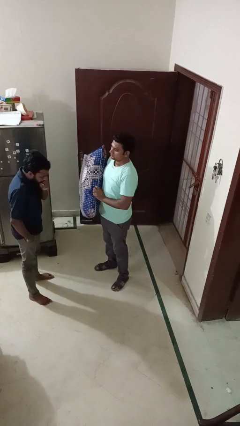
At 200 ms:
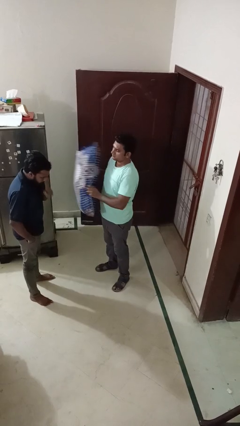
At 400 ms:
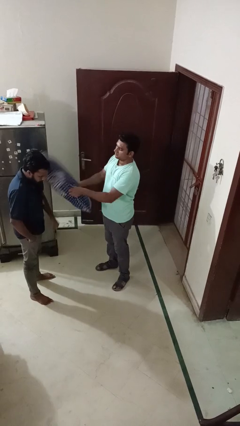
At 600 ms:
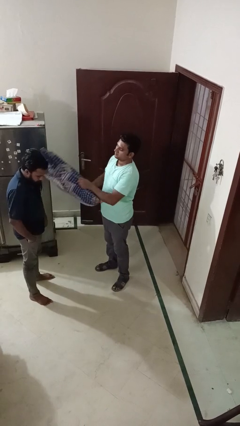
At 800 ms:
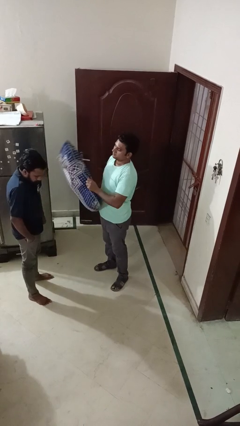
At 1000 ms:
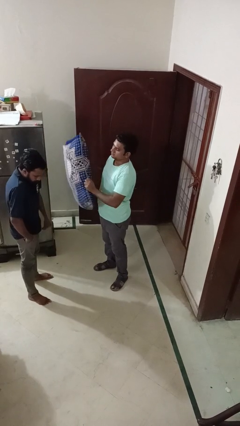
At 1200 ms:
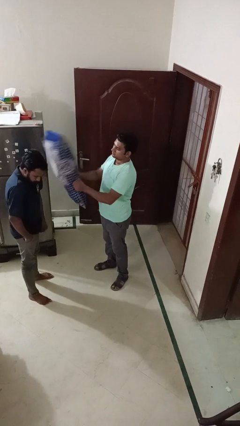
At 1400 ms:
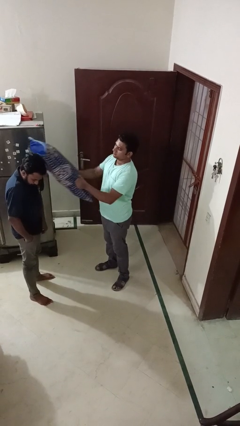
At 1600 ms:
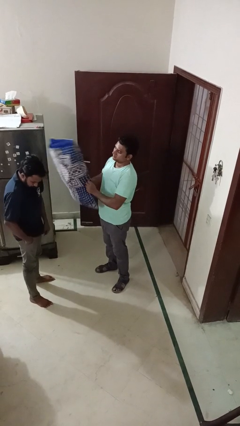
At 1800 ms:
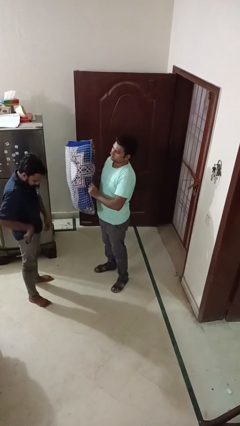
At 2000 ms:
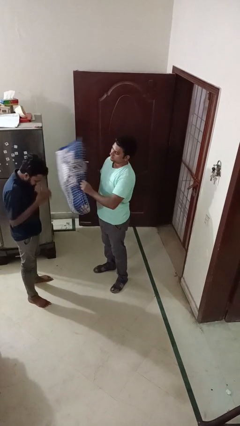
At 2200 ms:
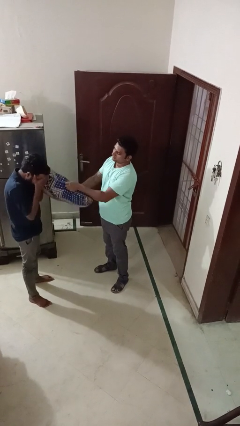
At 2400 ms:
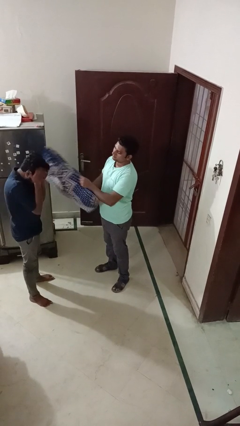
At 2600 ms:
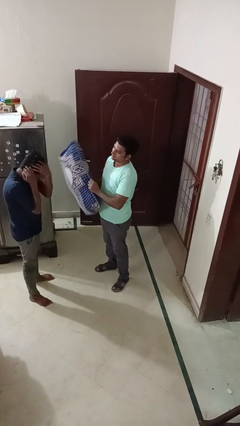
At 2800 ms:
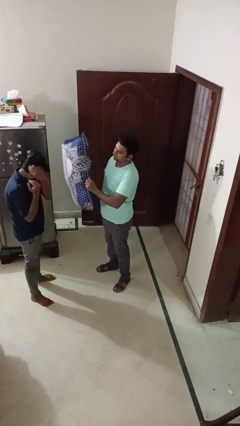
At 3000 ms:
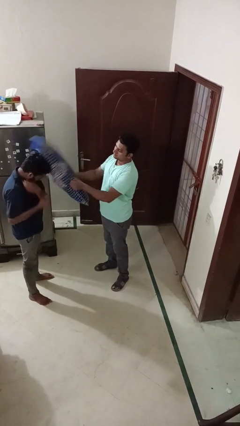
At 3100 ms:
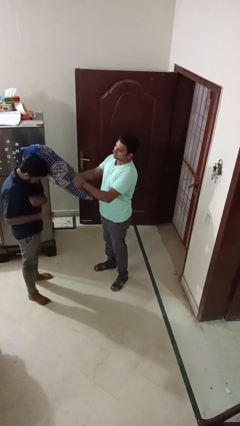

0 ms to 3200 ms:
person hits person with pillow

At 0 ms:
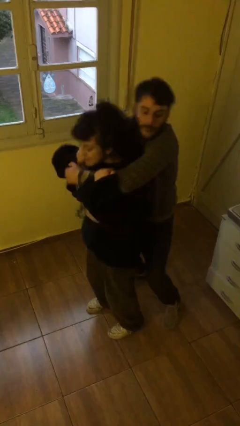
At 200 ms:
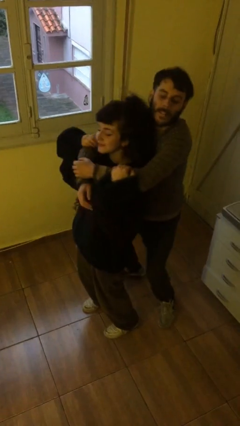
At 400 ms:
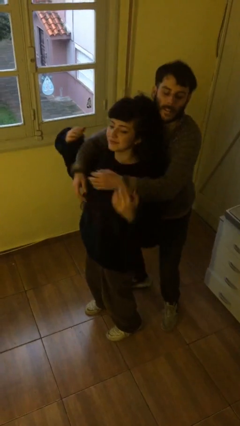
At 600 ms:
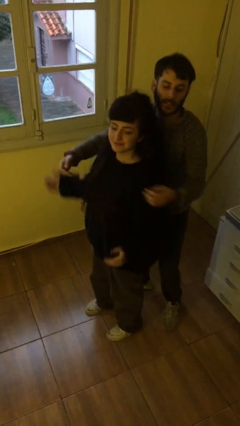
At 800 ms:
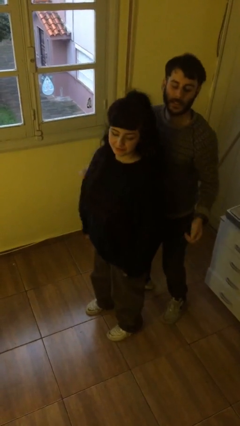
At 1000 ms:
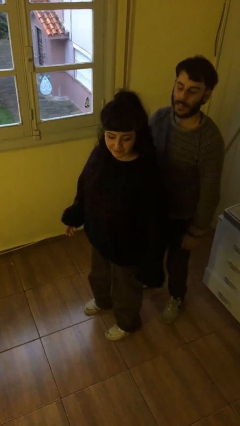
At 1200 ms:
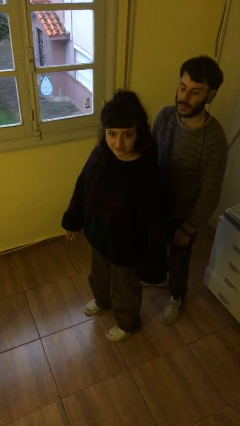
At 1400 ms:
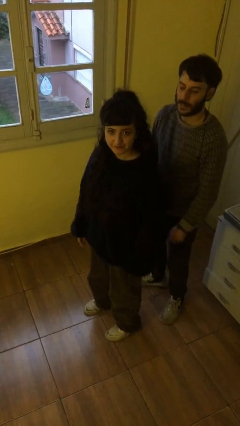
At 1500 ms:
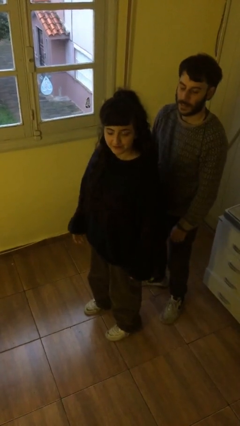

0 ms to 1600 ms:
person puts down person

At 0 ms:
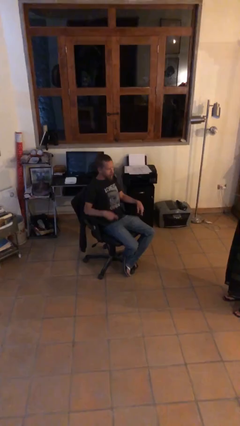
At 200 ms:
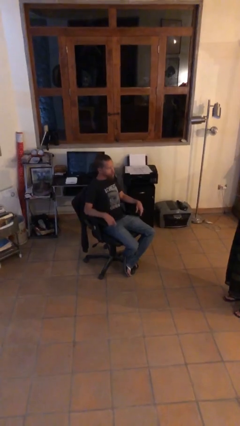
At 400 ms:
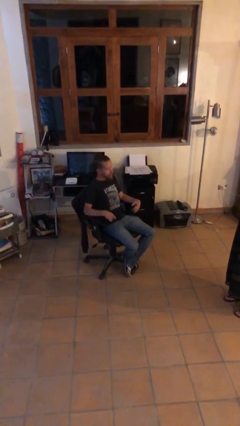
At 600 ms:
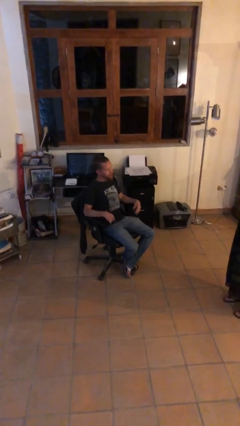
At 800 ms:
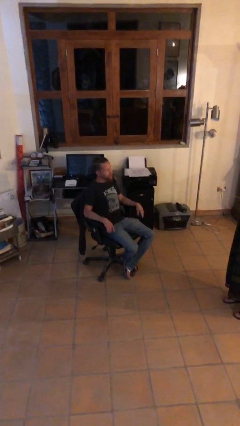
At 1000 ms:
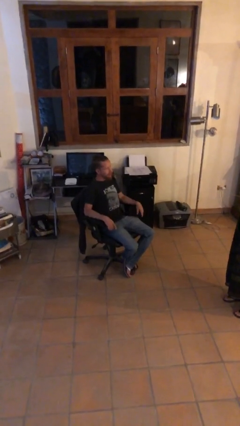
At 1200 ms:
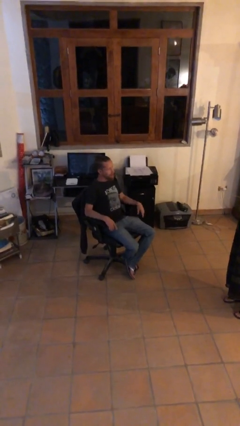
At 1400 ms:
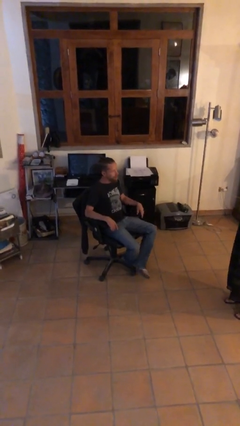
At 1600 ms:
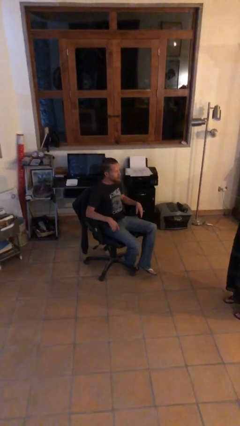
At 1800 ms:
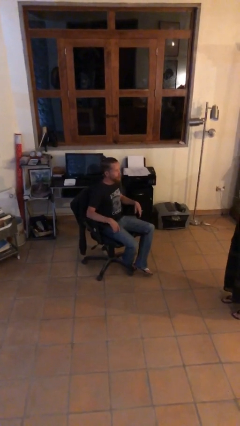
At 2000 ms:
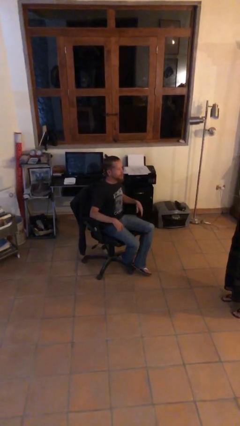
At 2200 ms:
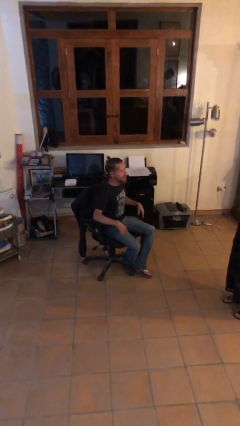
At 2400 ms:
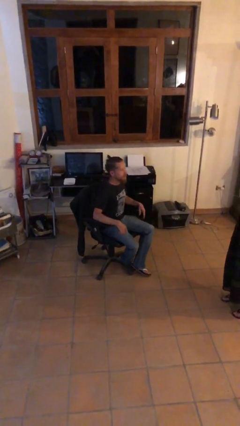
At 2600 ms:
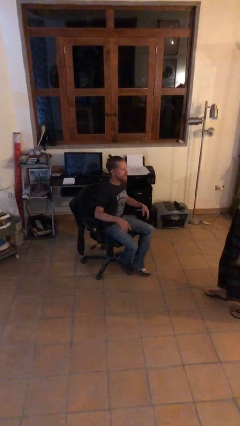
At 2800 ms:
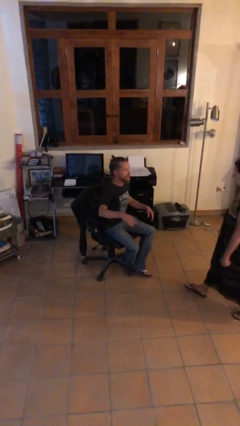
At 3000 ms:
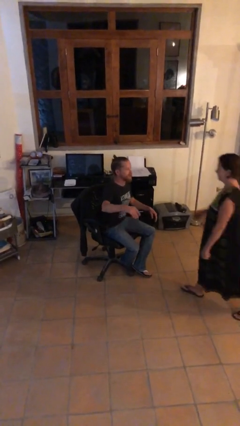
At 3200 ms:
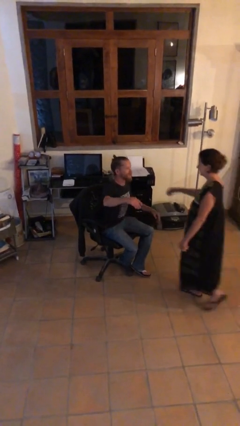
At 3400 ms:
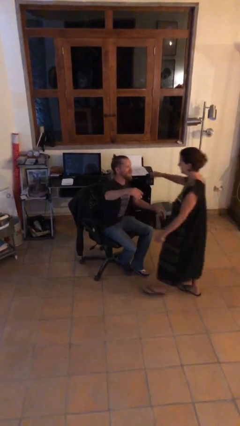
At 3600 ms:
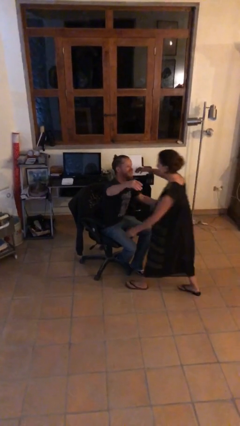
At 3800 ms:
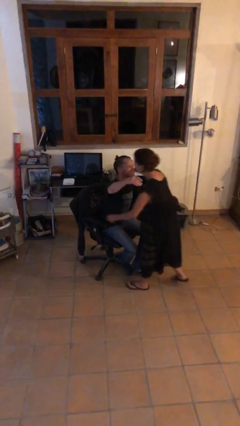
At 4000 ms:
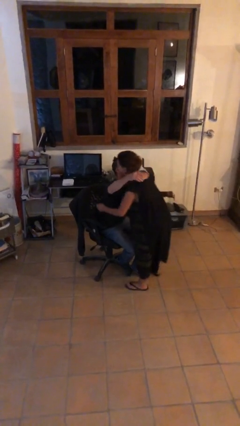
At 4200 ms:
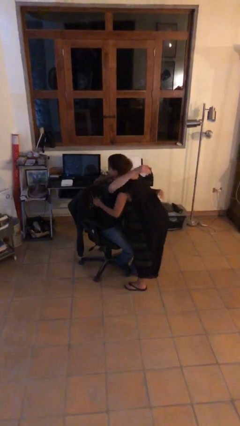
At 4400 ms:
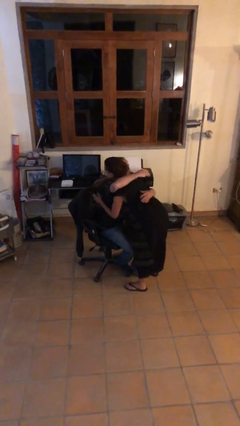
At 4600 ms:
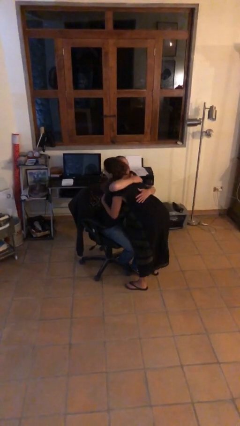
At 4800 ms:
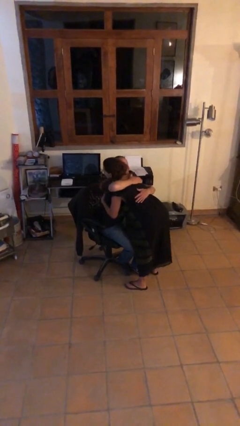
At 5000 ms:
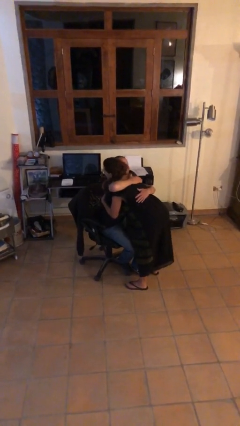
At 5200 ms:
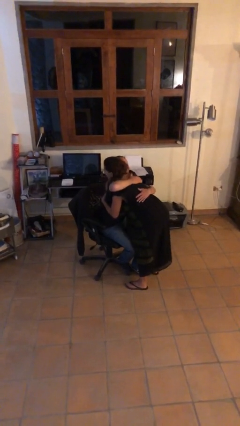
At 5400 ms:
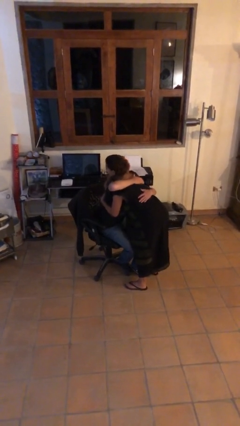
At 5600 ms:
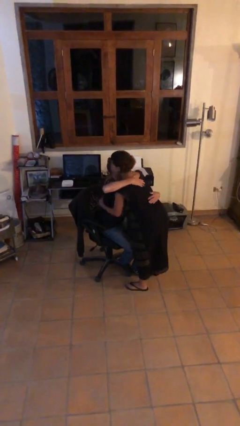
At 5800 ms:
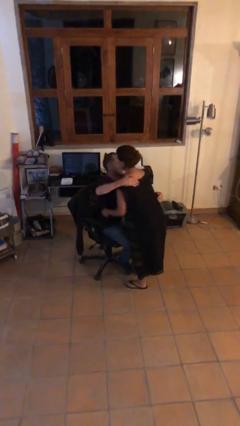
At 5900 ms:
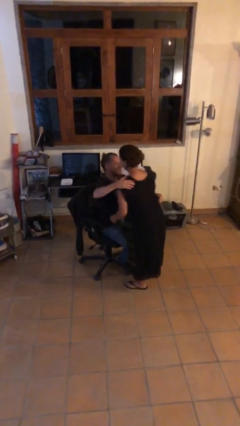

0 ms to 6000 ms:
person embraces person

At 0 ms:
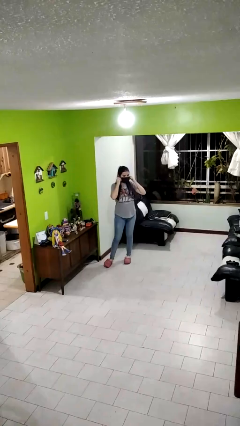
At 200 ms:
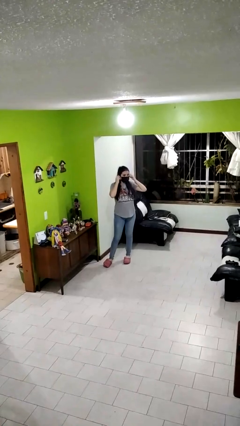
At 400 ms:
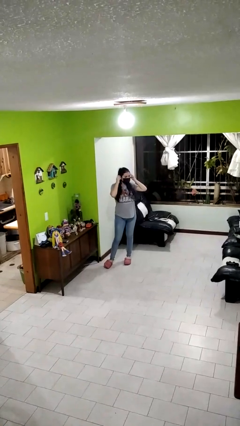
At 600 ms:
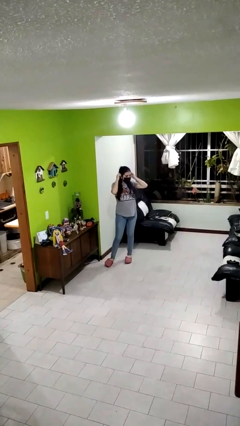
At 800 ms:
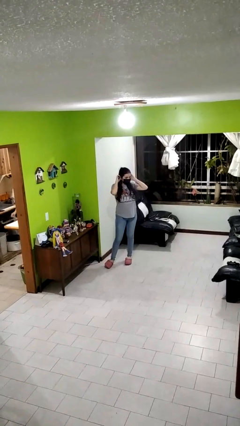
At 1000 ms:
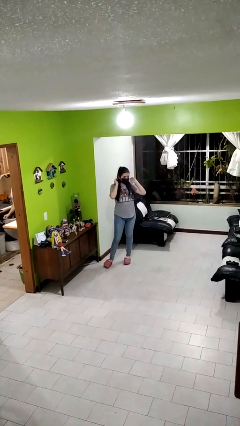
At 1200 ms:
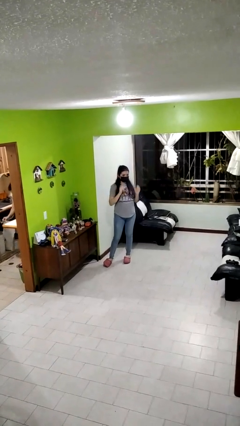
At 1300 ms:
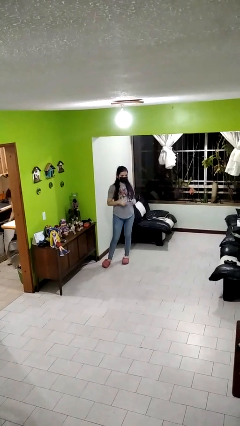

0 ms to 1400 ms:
person puts on facemask

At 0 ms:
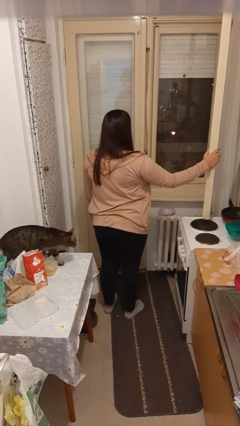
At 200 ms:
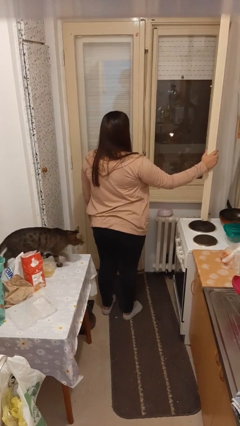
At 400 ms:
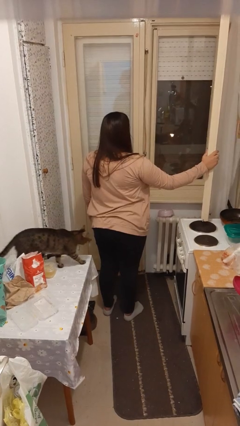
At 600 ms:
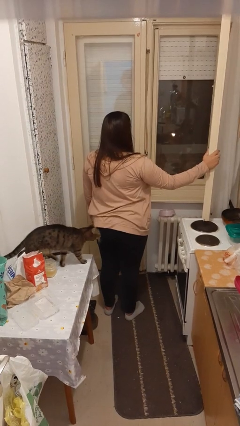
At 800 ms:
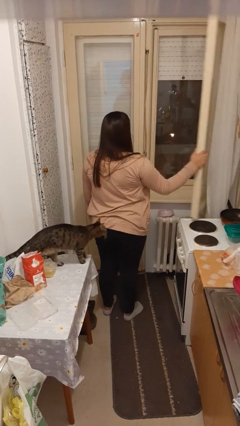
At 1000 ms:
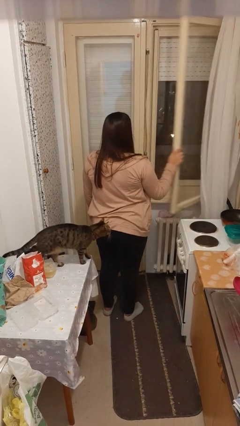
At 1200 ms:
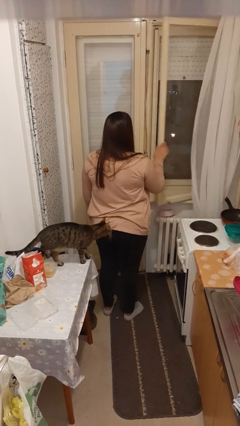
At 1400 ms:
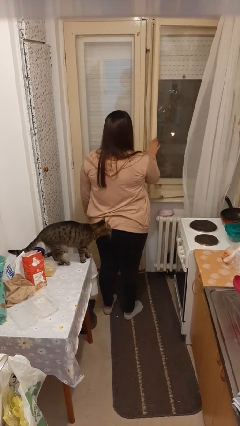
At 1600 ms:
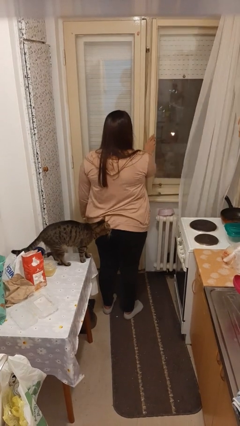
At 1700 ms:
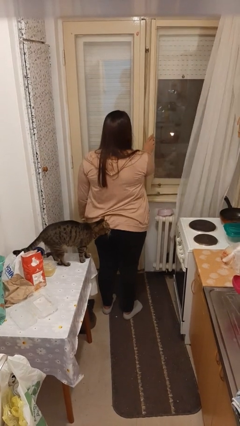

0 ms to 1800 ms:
person closes home window

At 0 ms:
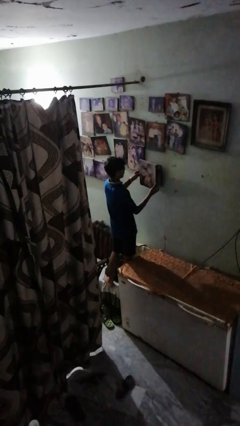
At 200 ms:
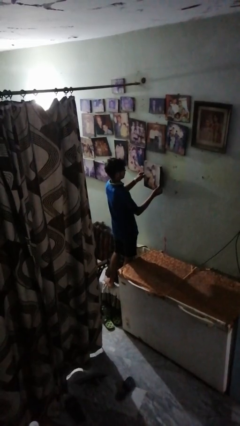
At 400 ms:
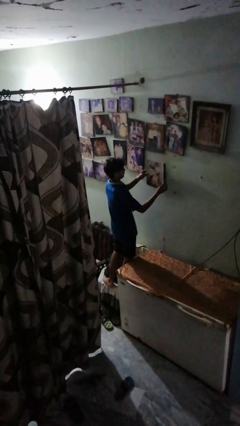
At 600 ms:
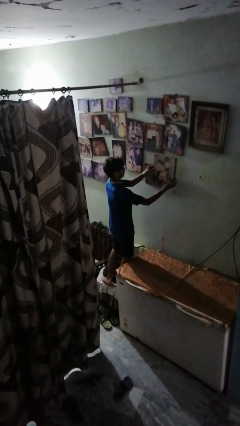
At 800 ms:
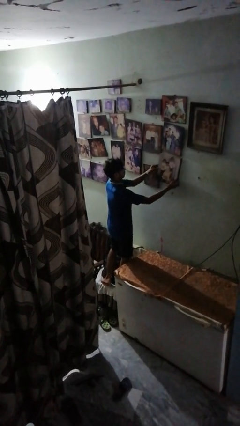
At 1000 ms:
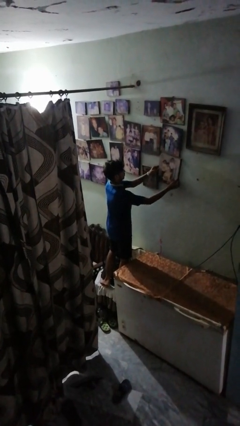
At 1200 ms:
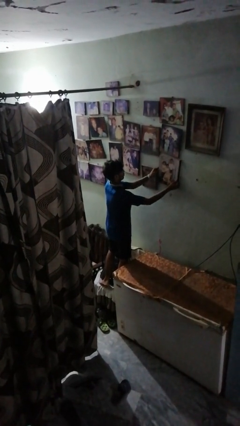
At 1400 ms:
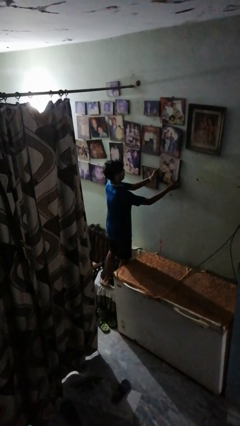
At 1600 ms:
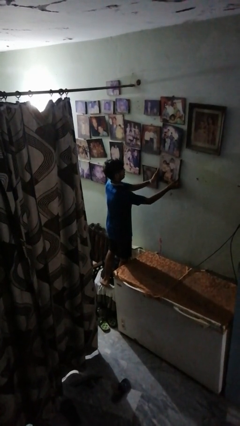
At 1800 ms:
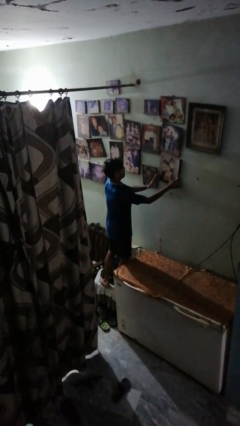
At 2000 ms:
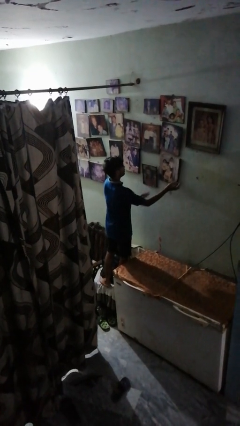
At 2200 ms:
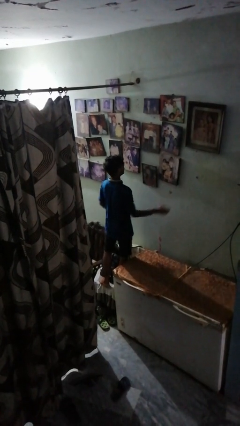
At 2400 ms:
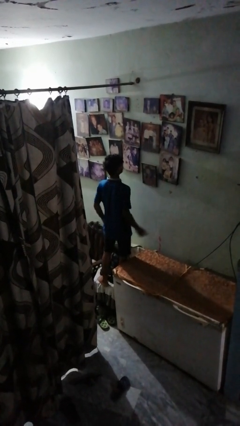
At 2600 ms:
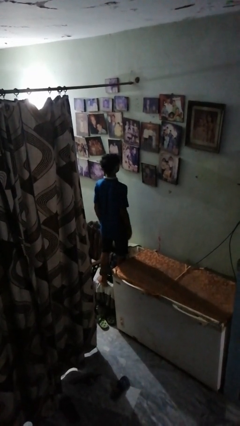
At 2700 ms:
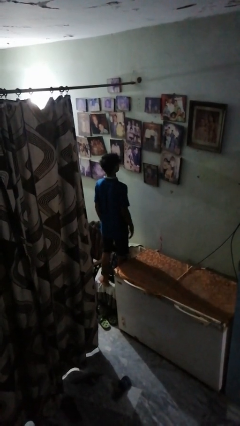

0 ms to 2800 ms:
person puts up picture frame

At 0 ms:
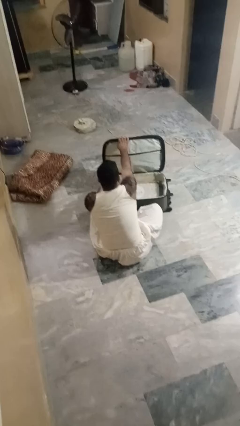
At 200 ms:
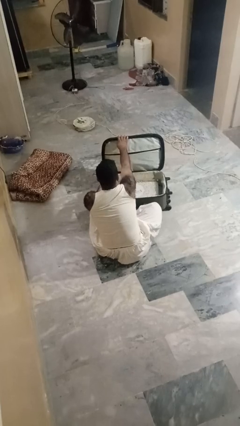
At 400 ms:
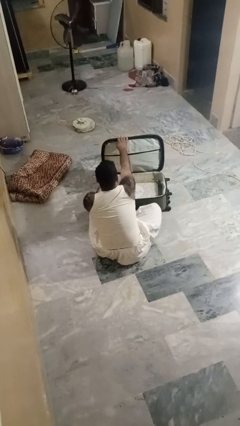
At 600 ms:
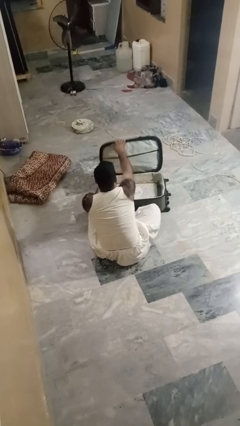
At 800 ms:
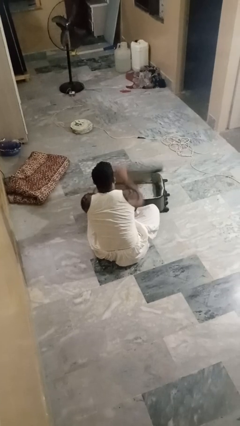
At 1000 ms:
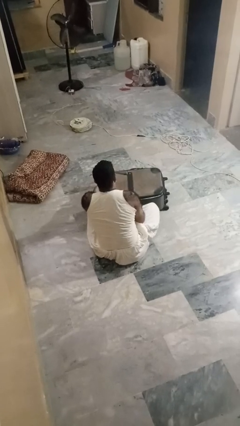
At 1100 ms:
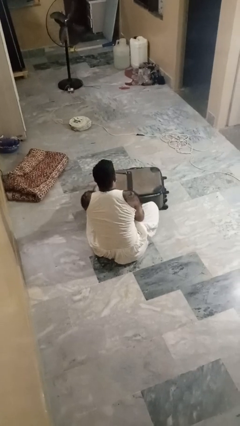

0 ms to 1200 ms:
person closes suitcase
